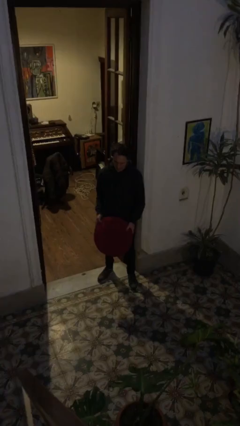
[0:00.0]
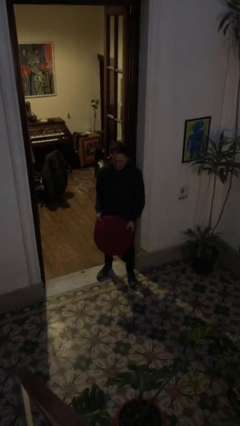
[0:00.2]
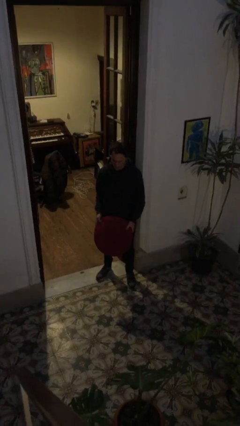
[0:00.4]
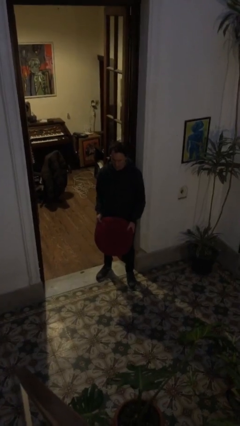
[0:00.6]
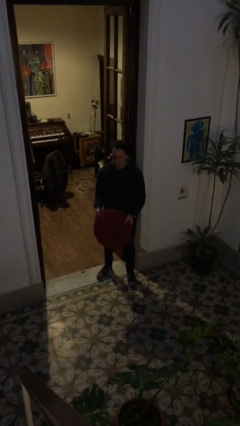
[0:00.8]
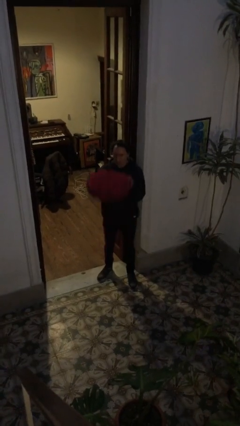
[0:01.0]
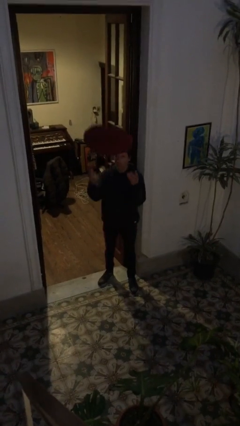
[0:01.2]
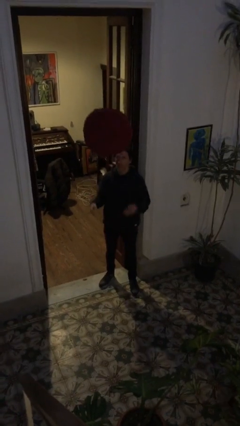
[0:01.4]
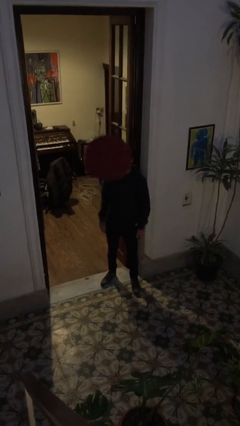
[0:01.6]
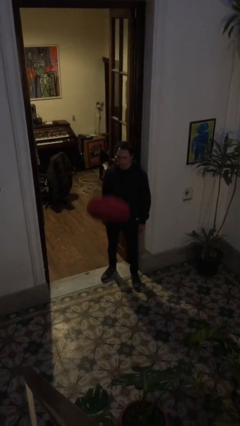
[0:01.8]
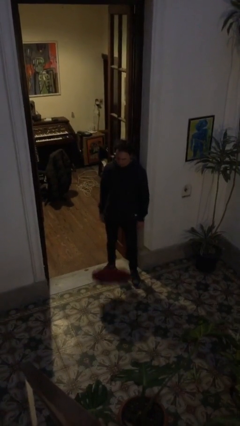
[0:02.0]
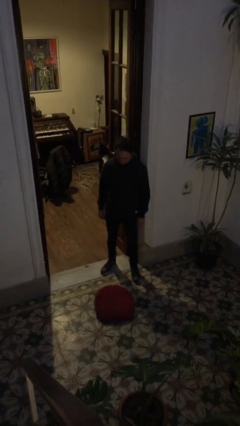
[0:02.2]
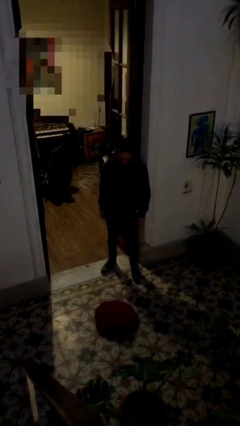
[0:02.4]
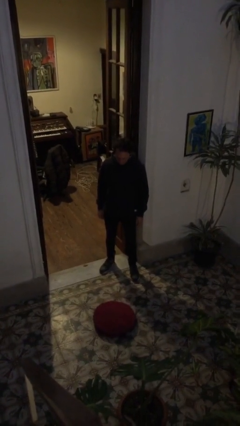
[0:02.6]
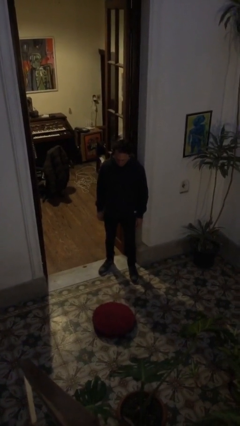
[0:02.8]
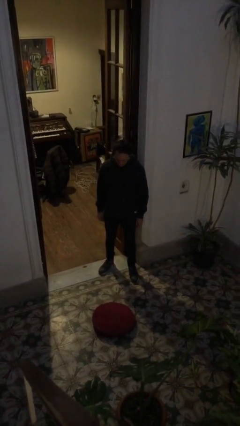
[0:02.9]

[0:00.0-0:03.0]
person throws object into air

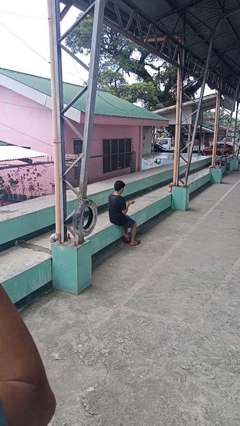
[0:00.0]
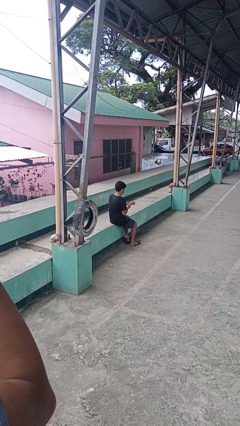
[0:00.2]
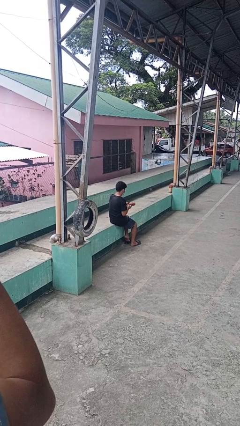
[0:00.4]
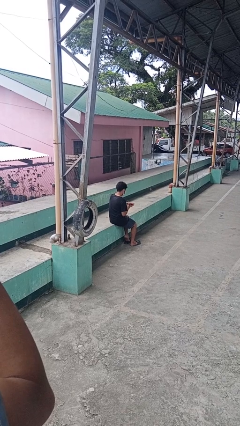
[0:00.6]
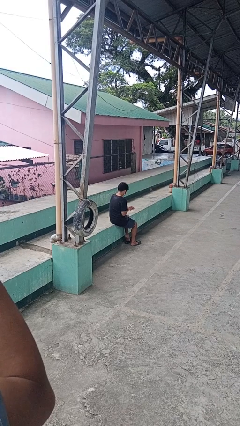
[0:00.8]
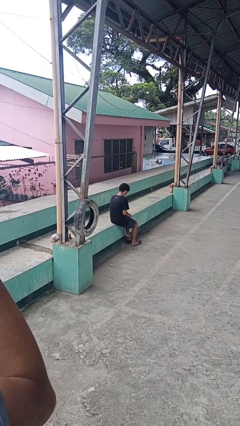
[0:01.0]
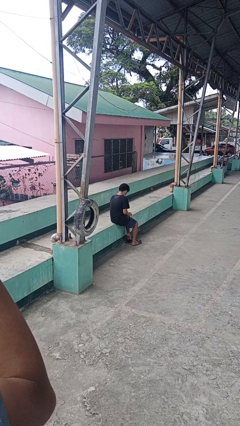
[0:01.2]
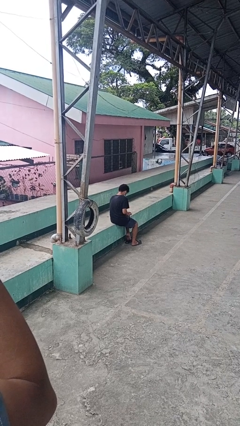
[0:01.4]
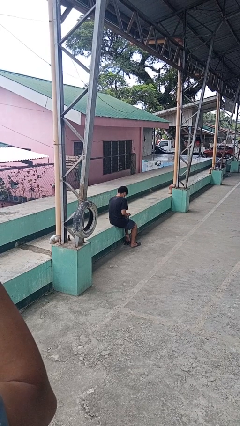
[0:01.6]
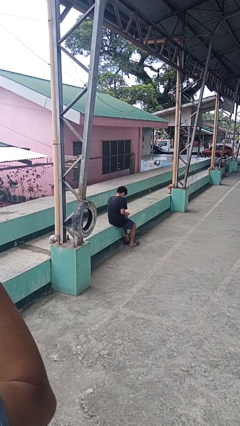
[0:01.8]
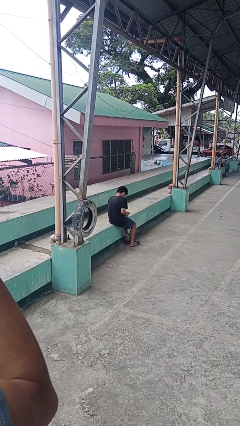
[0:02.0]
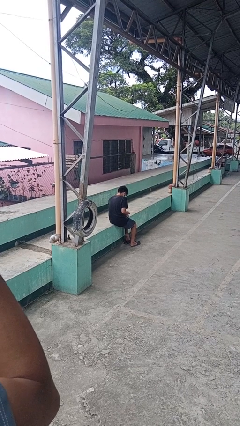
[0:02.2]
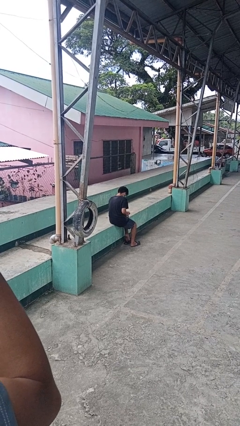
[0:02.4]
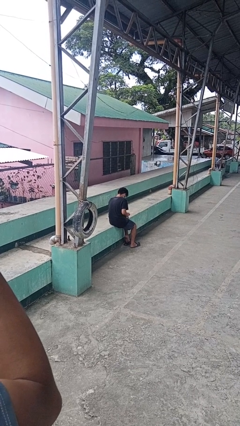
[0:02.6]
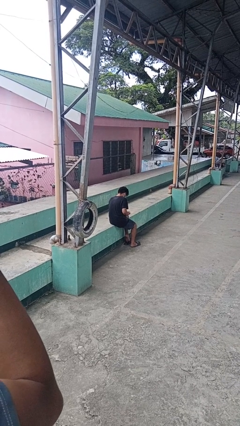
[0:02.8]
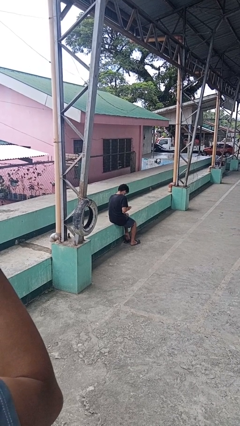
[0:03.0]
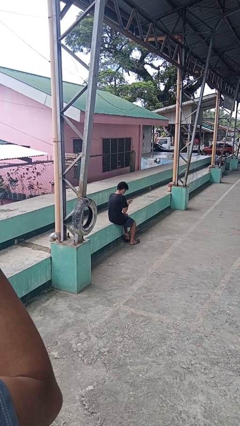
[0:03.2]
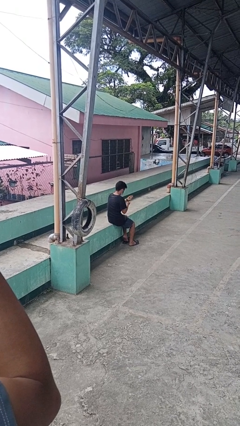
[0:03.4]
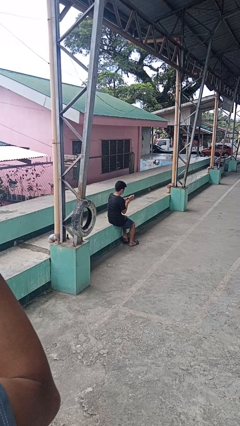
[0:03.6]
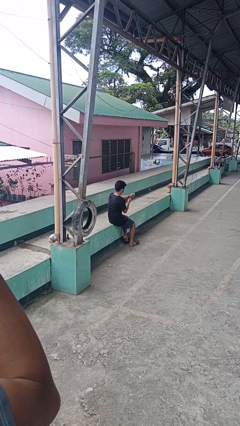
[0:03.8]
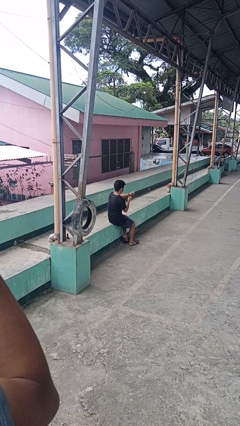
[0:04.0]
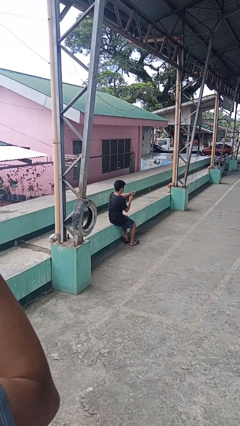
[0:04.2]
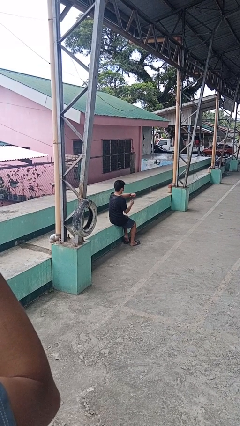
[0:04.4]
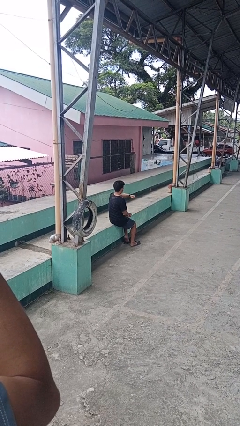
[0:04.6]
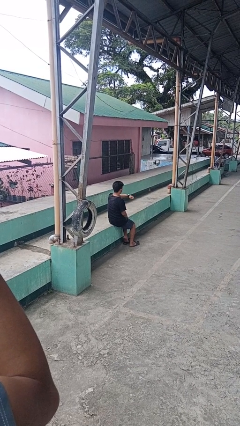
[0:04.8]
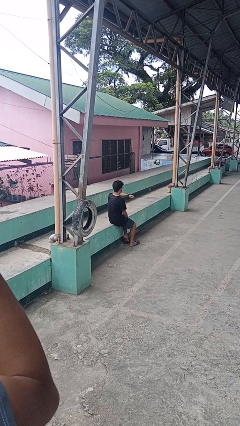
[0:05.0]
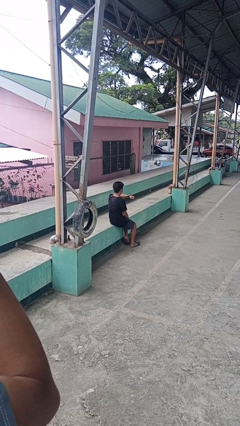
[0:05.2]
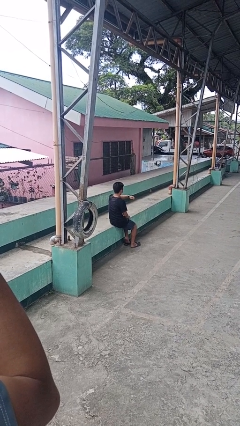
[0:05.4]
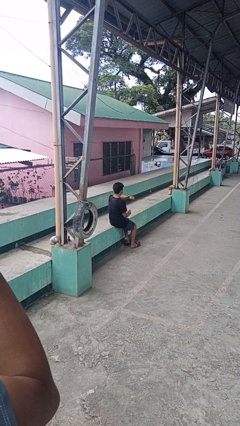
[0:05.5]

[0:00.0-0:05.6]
person puts on wristwatch

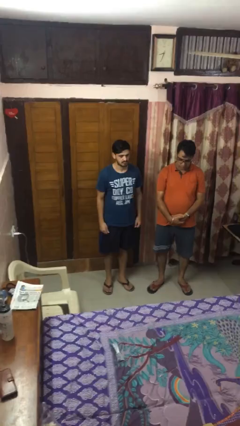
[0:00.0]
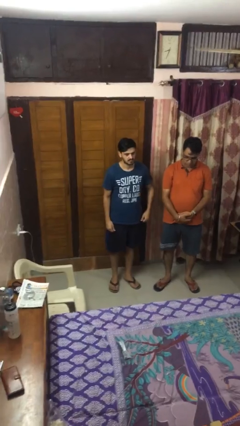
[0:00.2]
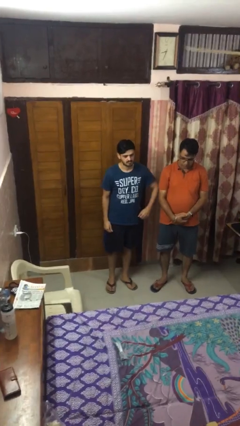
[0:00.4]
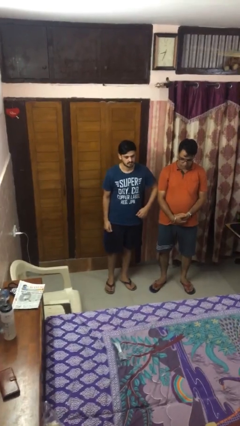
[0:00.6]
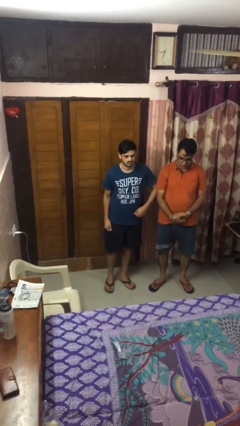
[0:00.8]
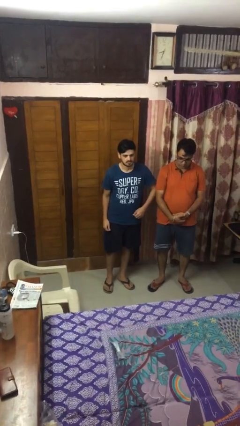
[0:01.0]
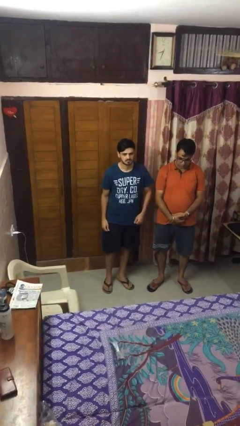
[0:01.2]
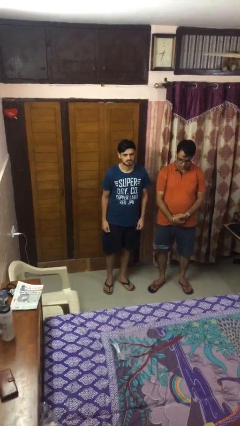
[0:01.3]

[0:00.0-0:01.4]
person nudges person with elbow

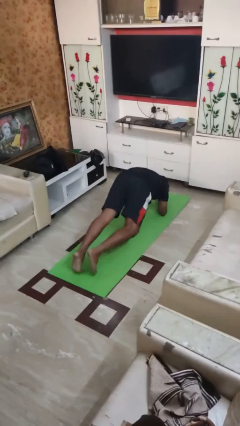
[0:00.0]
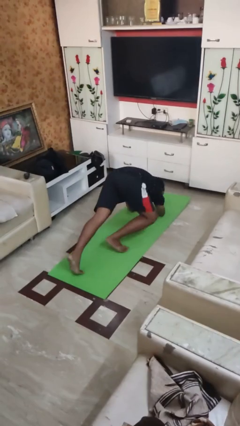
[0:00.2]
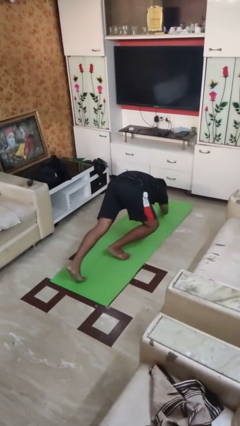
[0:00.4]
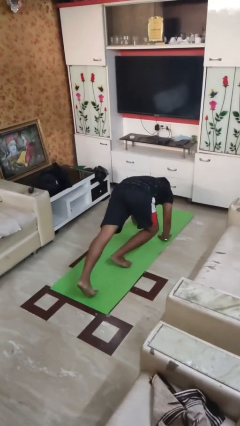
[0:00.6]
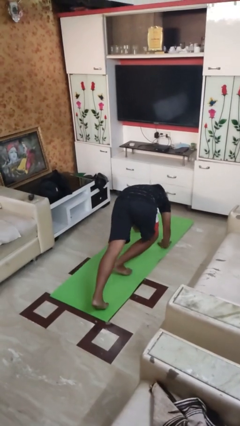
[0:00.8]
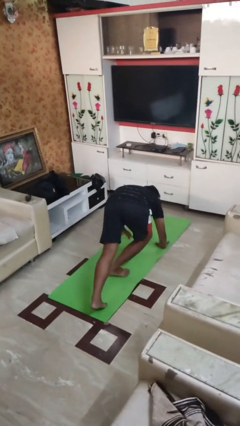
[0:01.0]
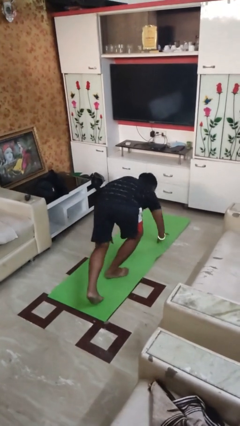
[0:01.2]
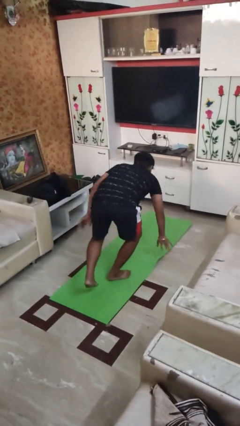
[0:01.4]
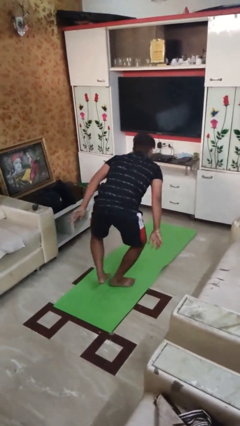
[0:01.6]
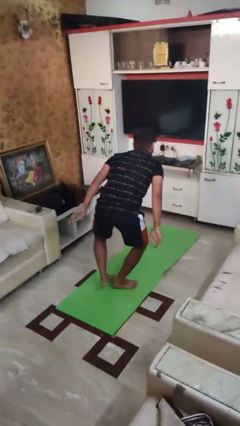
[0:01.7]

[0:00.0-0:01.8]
person stands up from floor

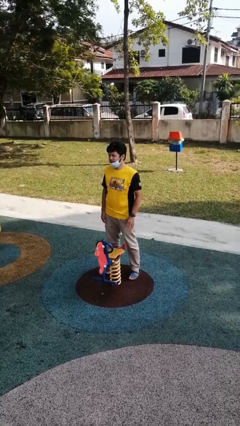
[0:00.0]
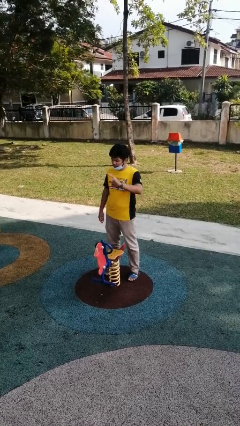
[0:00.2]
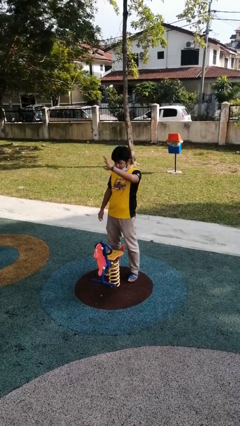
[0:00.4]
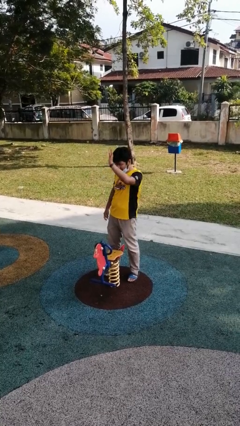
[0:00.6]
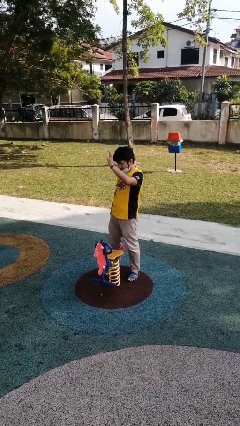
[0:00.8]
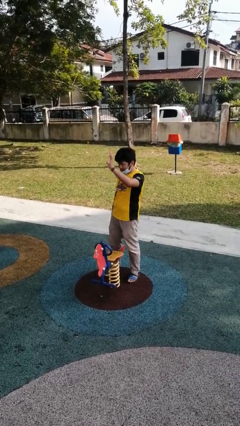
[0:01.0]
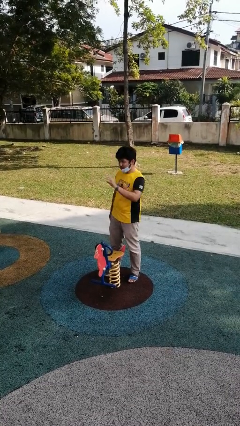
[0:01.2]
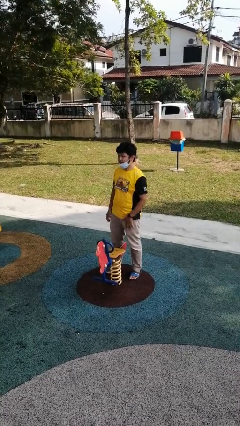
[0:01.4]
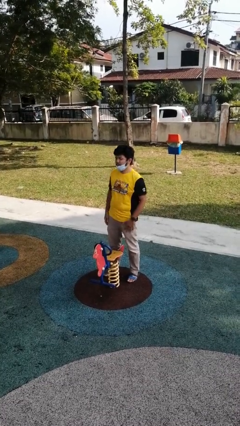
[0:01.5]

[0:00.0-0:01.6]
person waves at person

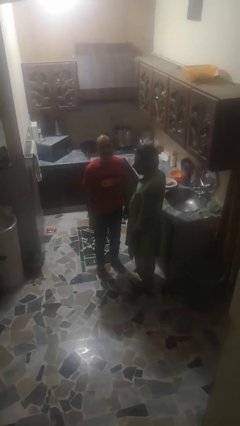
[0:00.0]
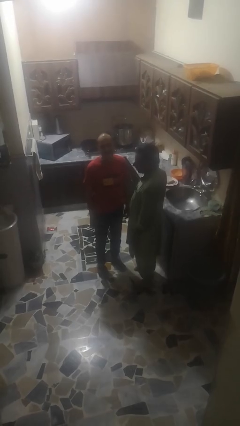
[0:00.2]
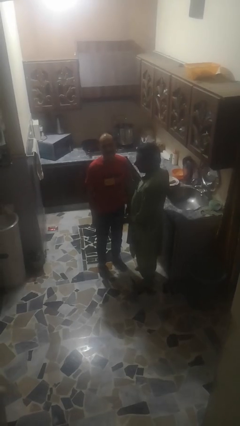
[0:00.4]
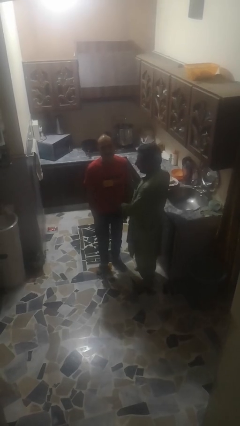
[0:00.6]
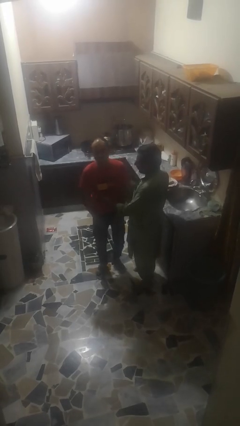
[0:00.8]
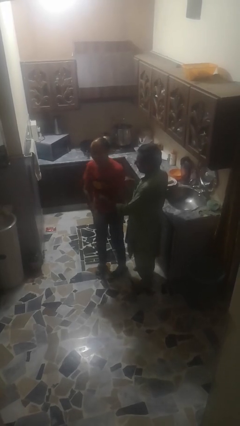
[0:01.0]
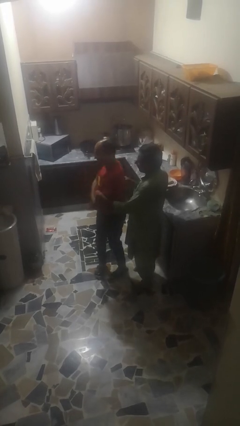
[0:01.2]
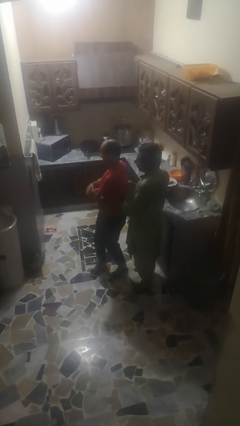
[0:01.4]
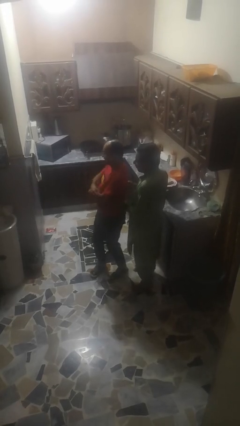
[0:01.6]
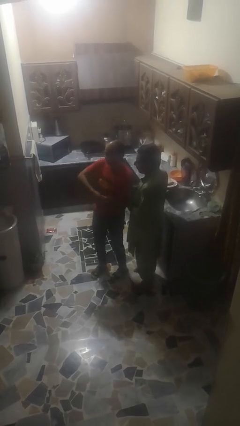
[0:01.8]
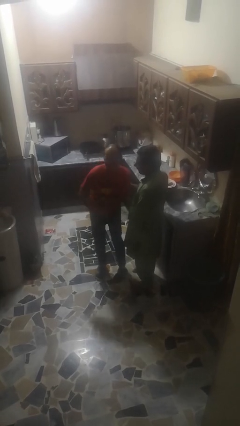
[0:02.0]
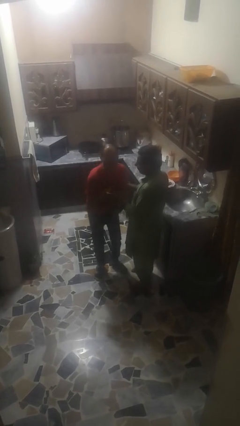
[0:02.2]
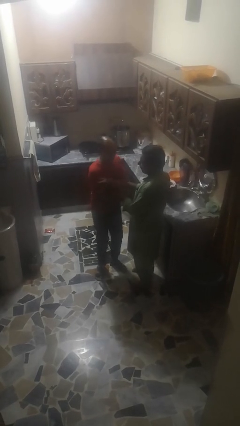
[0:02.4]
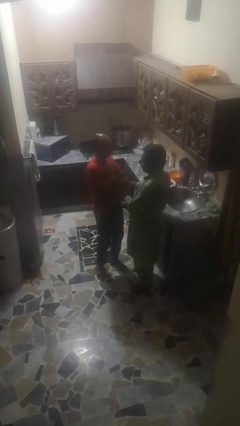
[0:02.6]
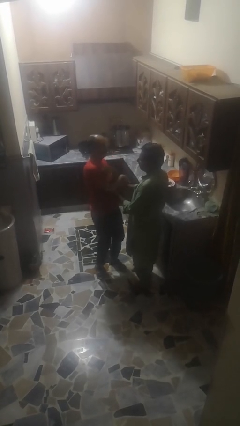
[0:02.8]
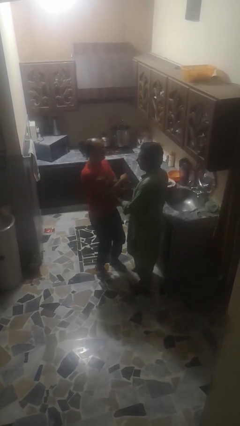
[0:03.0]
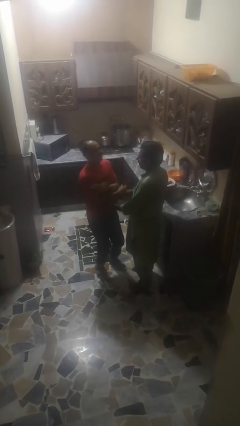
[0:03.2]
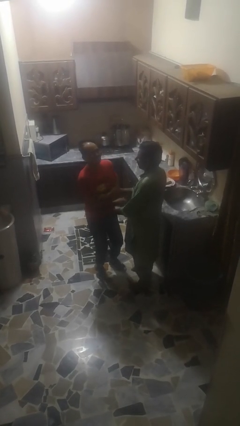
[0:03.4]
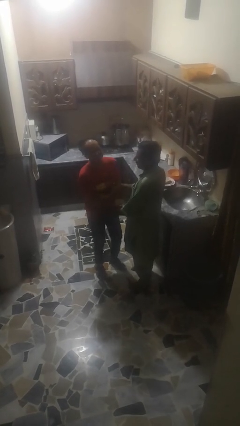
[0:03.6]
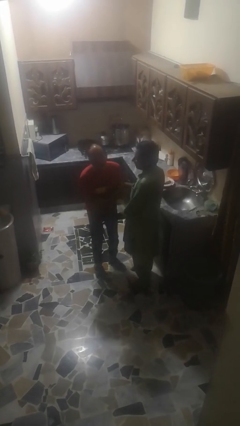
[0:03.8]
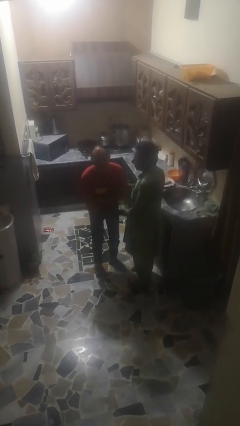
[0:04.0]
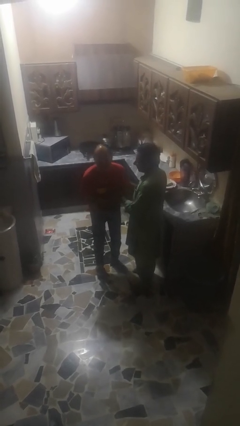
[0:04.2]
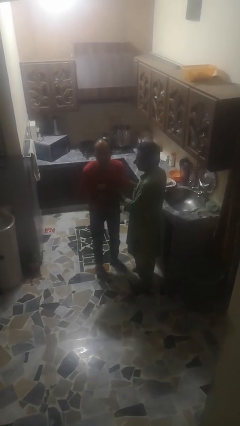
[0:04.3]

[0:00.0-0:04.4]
person tickles person
